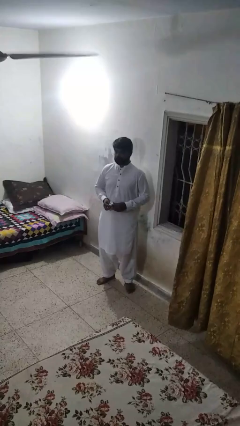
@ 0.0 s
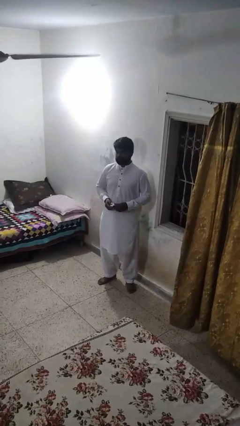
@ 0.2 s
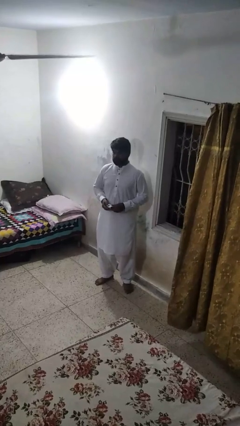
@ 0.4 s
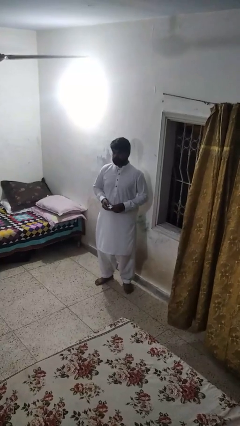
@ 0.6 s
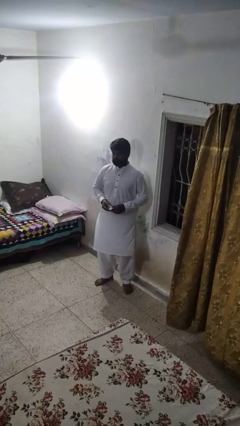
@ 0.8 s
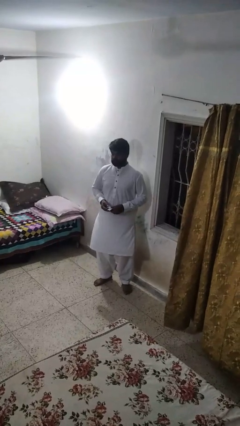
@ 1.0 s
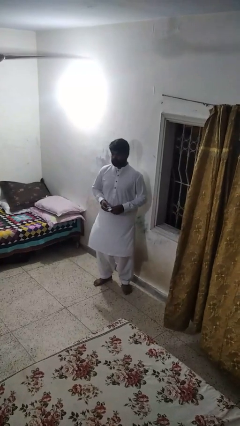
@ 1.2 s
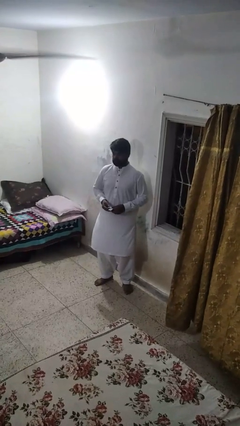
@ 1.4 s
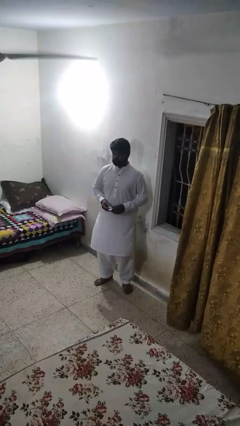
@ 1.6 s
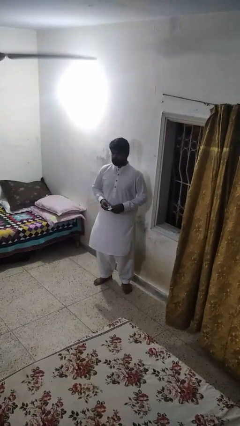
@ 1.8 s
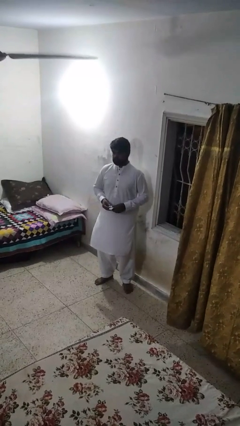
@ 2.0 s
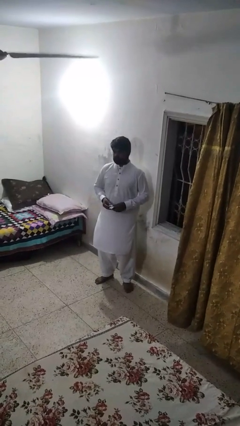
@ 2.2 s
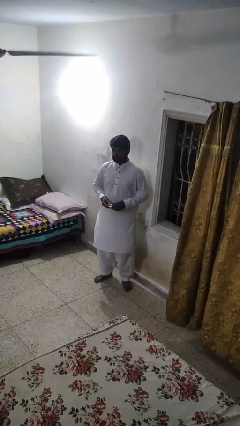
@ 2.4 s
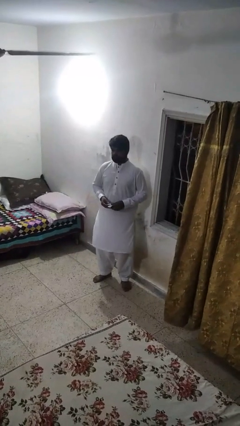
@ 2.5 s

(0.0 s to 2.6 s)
person applies shaving cream

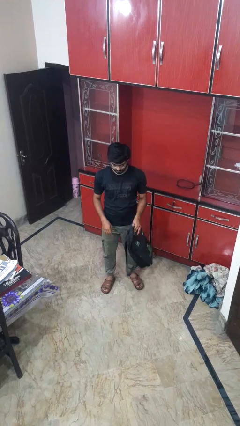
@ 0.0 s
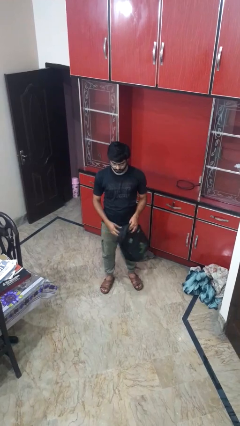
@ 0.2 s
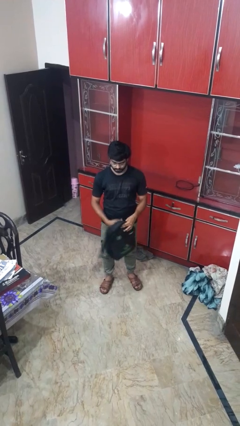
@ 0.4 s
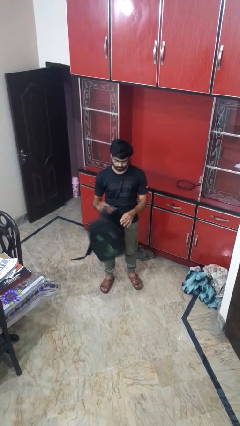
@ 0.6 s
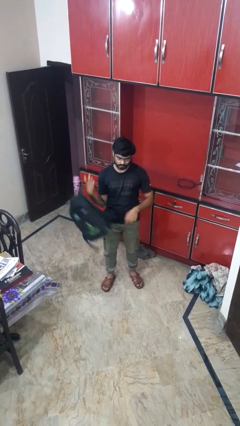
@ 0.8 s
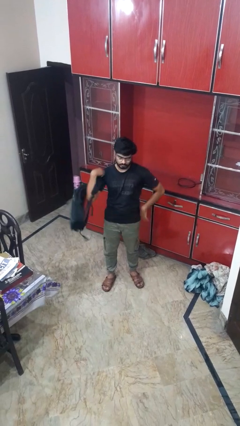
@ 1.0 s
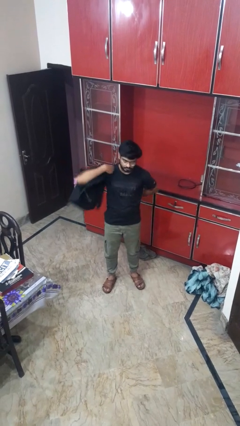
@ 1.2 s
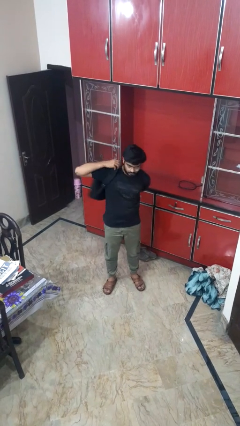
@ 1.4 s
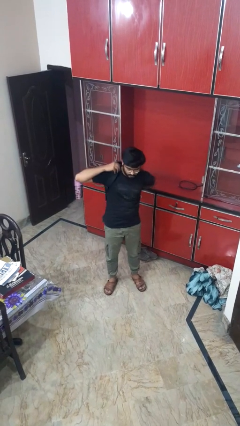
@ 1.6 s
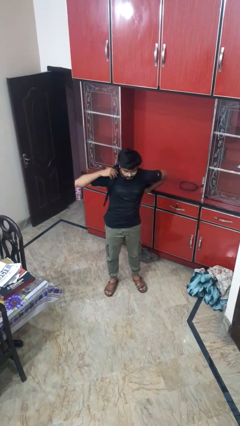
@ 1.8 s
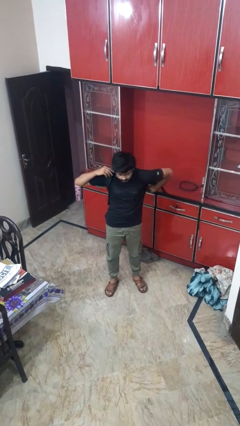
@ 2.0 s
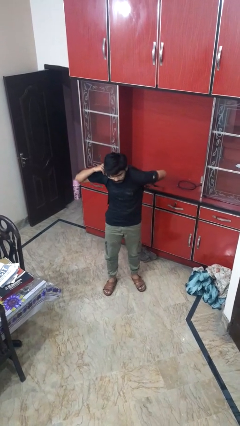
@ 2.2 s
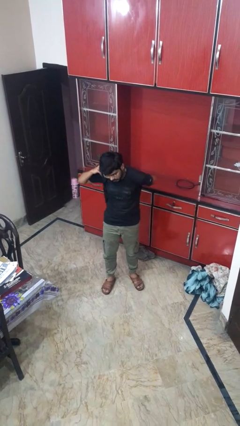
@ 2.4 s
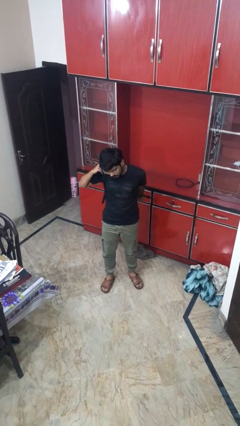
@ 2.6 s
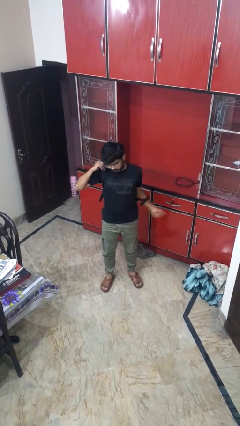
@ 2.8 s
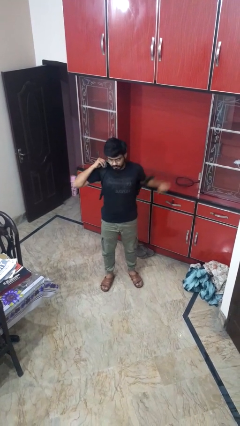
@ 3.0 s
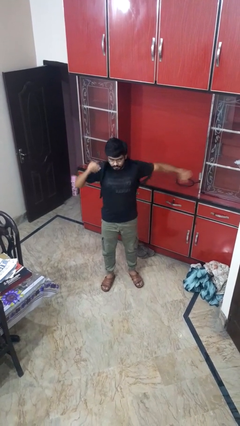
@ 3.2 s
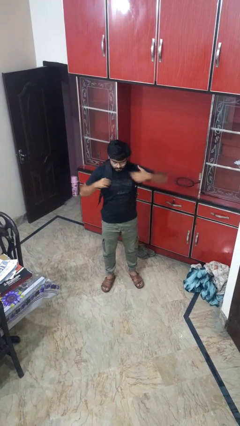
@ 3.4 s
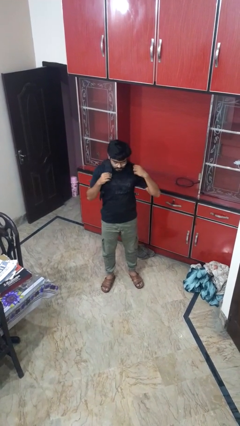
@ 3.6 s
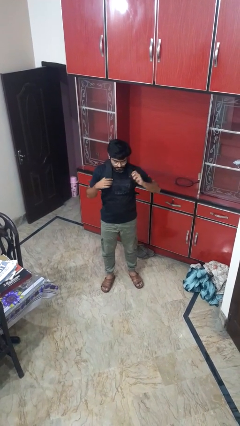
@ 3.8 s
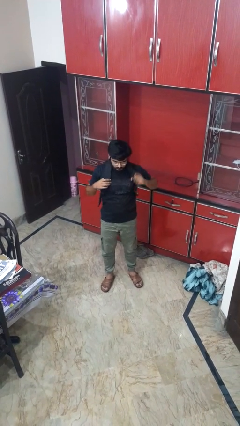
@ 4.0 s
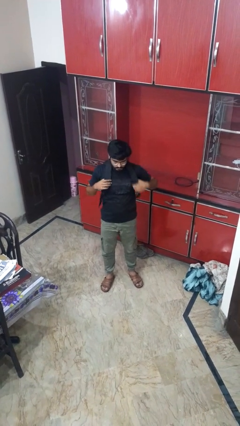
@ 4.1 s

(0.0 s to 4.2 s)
person puts on backpack

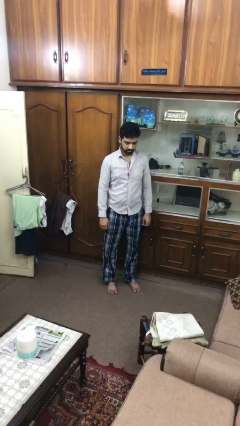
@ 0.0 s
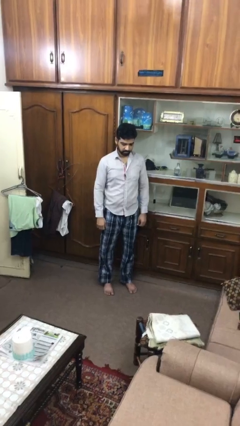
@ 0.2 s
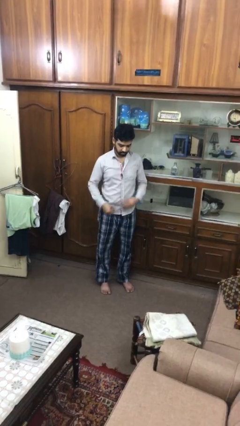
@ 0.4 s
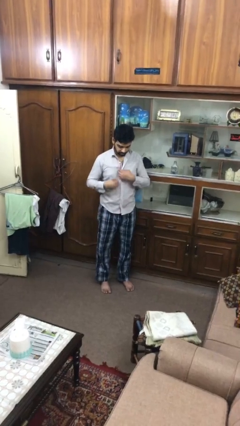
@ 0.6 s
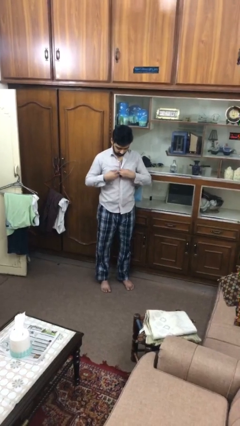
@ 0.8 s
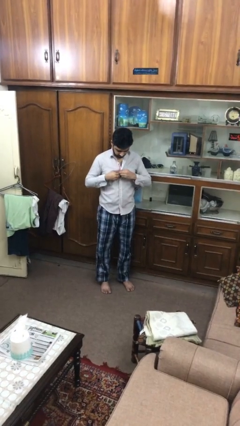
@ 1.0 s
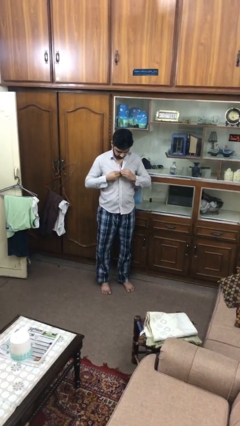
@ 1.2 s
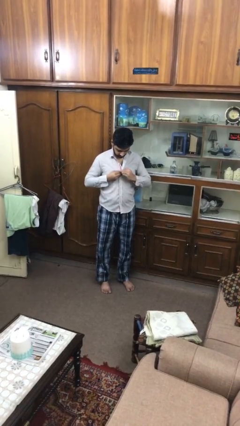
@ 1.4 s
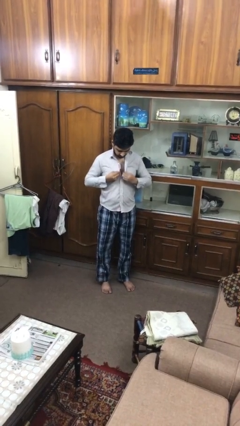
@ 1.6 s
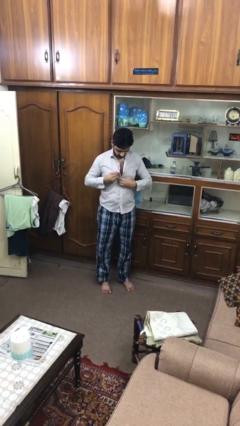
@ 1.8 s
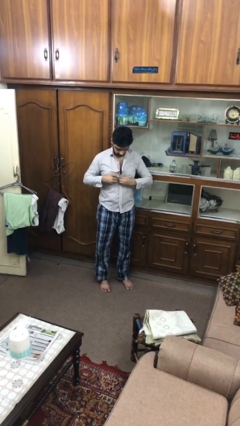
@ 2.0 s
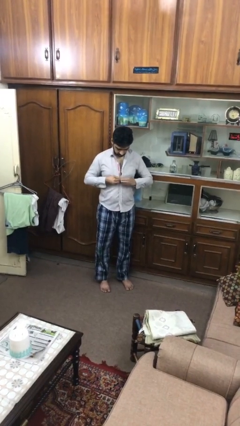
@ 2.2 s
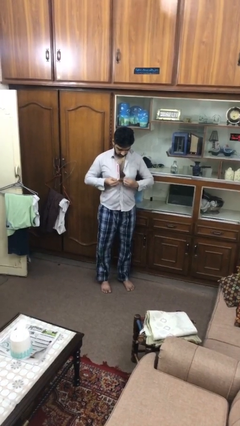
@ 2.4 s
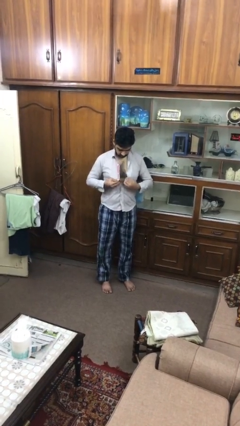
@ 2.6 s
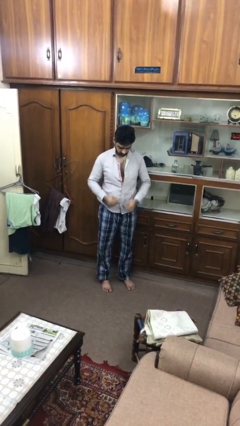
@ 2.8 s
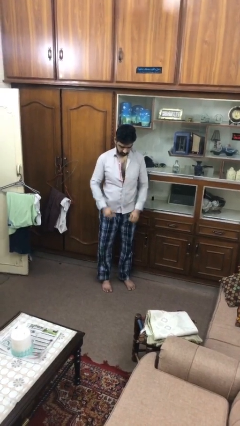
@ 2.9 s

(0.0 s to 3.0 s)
person unbuttons shirt

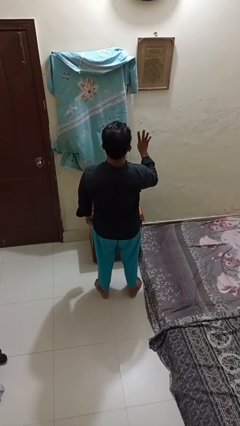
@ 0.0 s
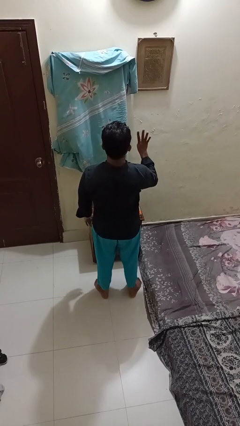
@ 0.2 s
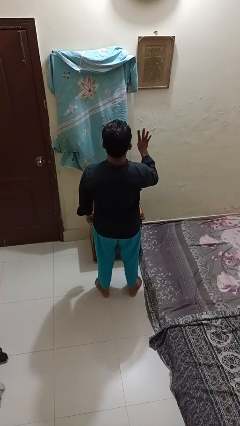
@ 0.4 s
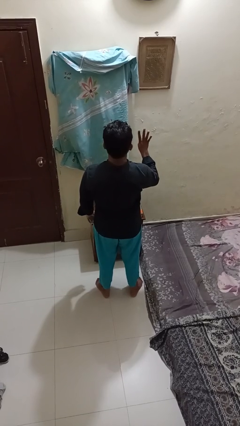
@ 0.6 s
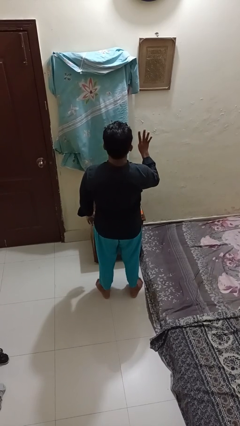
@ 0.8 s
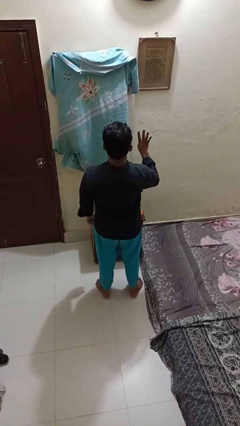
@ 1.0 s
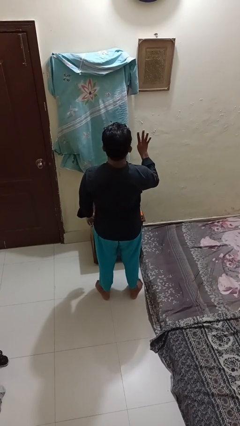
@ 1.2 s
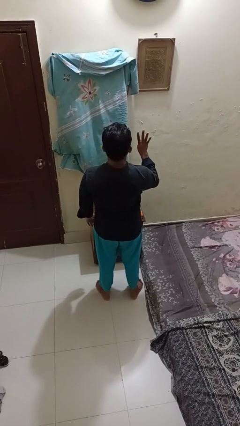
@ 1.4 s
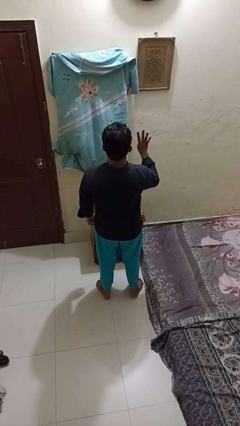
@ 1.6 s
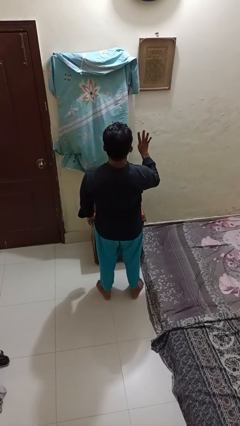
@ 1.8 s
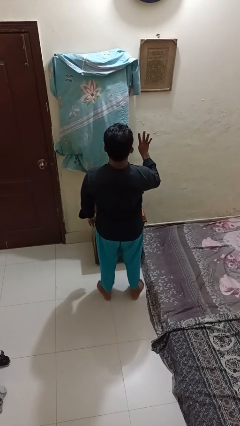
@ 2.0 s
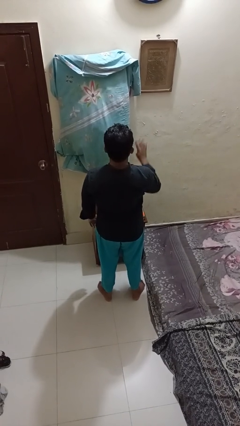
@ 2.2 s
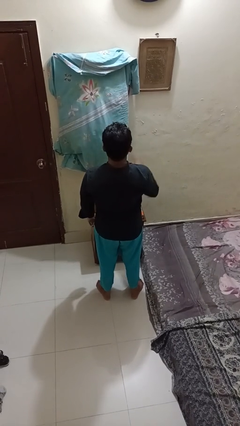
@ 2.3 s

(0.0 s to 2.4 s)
person gestures number four

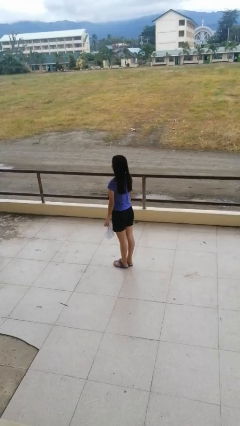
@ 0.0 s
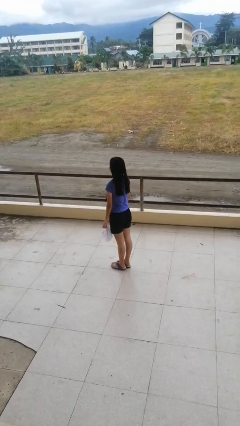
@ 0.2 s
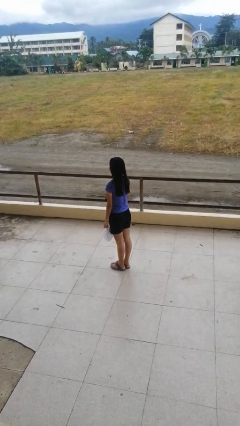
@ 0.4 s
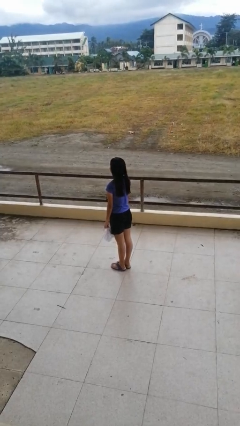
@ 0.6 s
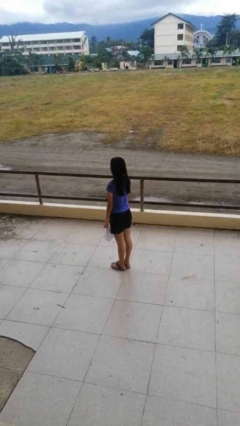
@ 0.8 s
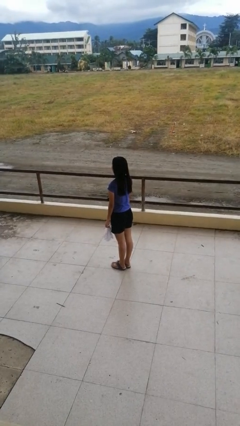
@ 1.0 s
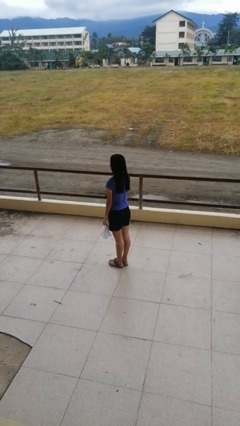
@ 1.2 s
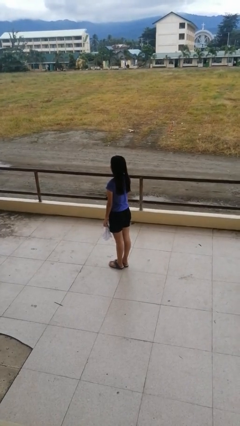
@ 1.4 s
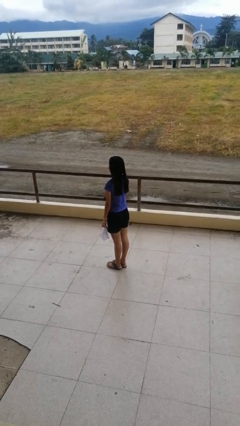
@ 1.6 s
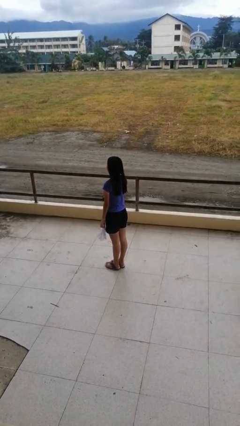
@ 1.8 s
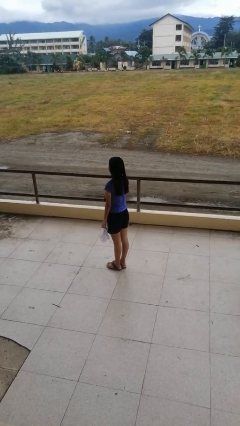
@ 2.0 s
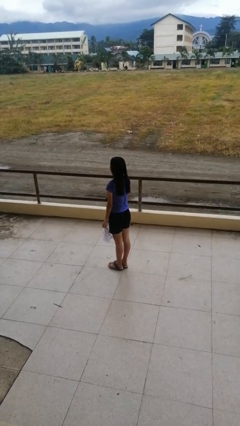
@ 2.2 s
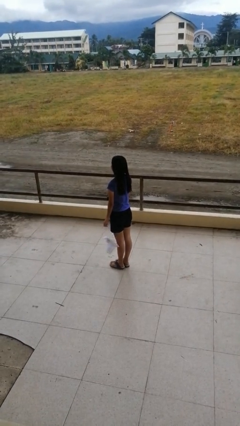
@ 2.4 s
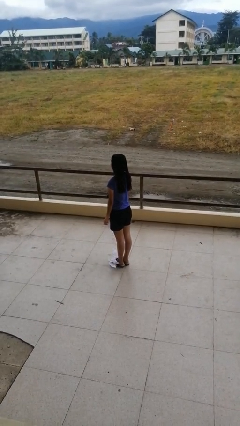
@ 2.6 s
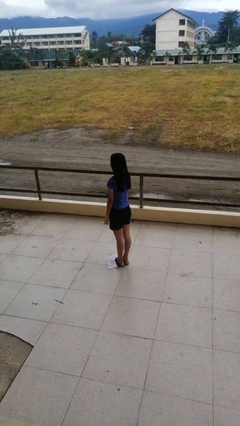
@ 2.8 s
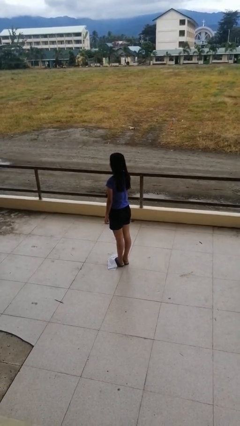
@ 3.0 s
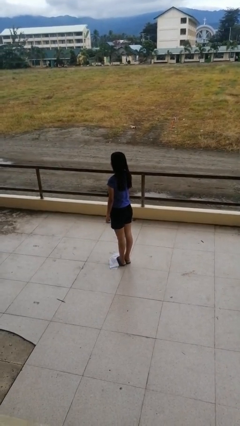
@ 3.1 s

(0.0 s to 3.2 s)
person drops object

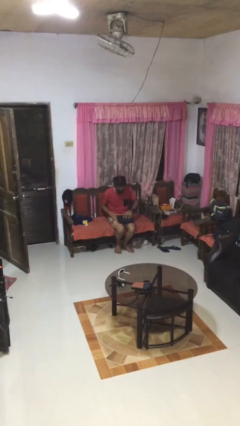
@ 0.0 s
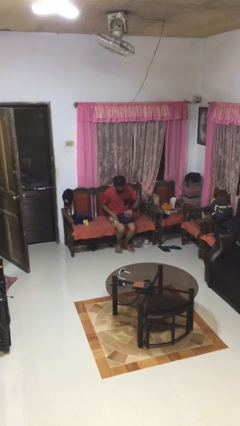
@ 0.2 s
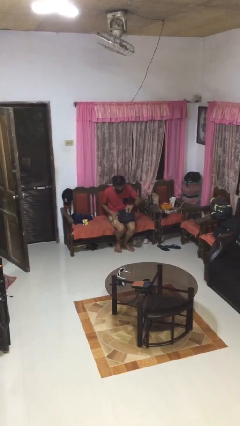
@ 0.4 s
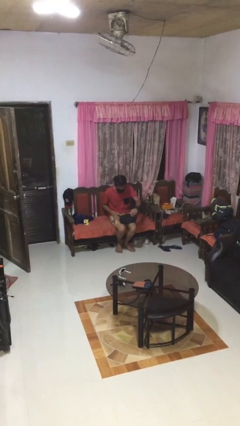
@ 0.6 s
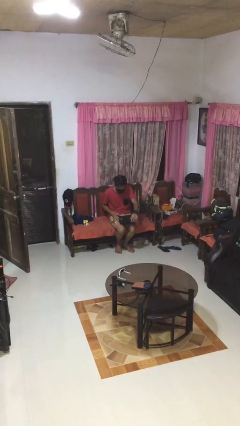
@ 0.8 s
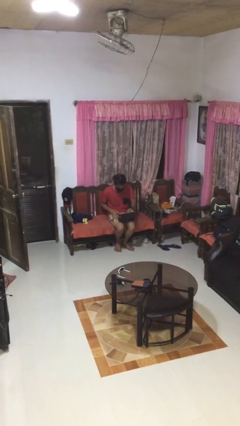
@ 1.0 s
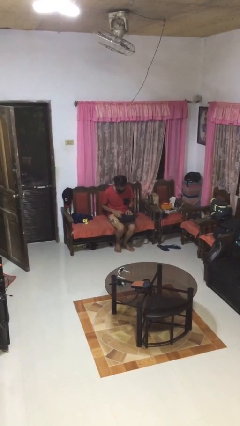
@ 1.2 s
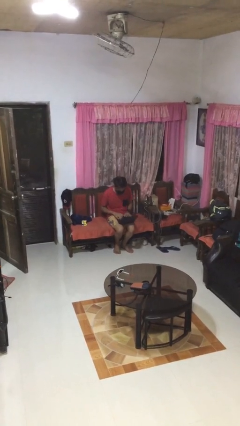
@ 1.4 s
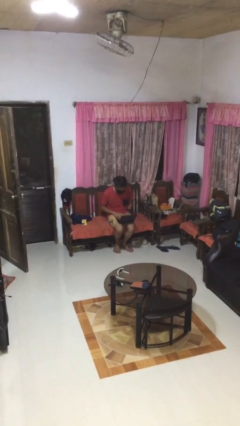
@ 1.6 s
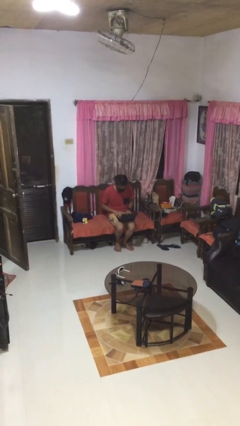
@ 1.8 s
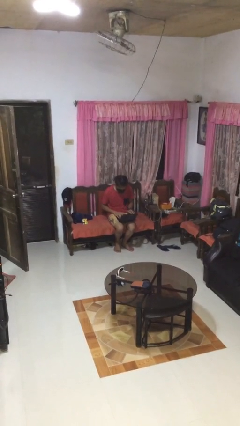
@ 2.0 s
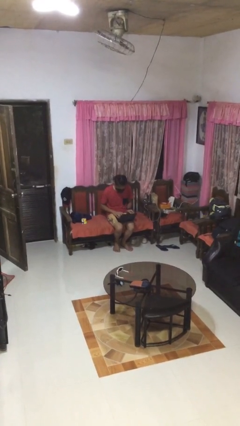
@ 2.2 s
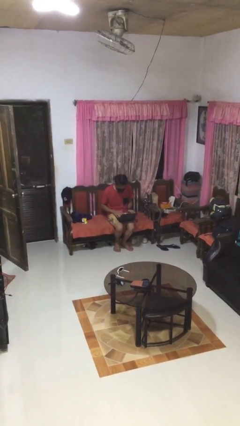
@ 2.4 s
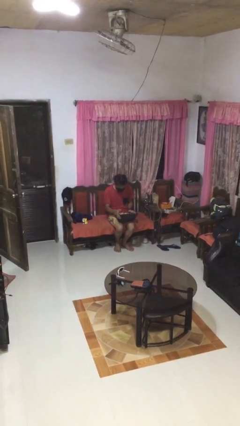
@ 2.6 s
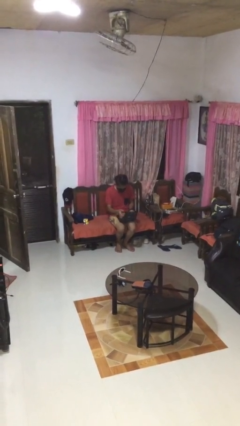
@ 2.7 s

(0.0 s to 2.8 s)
person opens laptop
